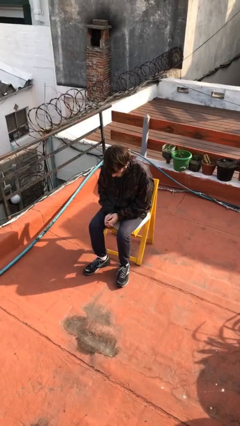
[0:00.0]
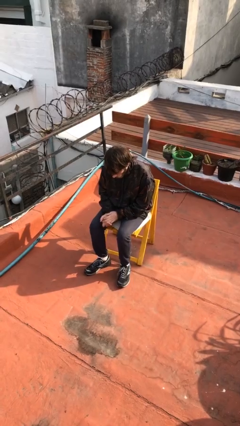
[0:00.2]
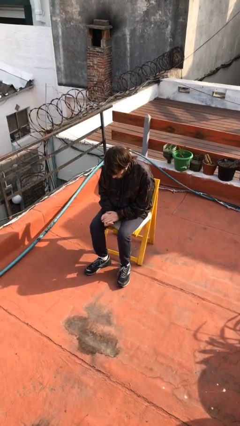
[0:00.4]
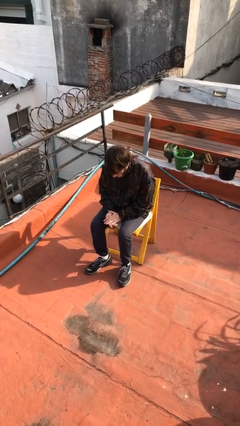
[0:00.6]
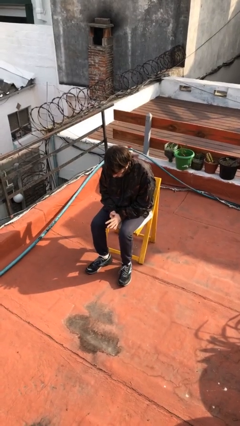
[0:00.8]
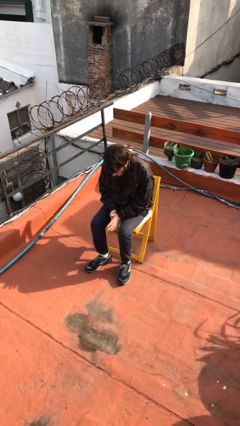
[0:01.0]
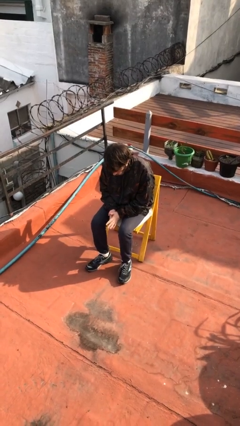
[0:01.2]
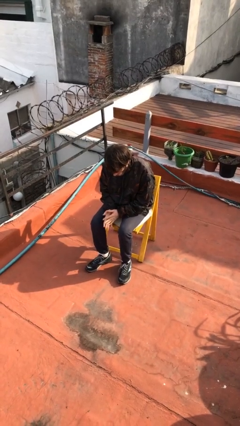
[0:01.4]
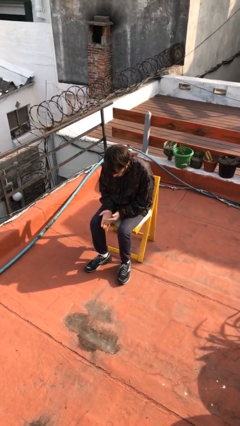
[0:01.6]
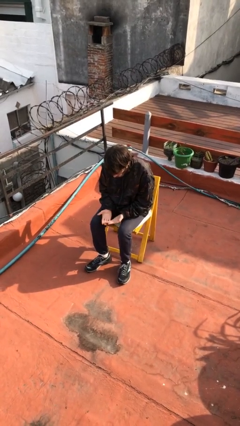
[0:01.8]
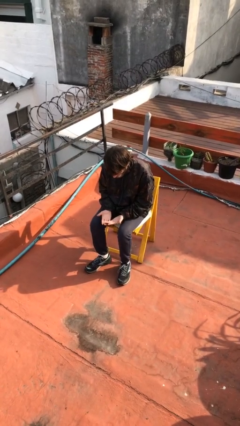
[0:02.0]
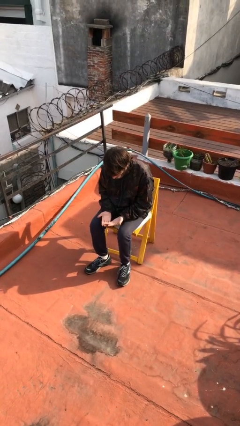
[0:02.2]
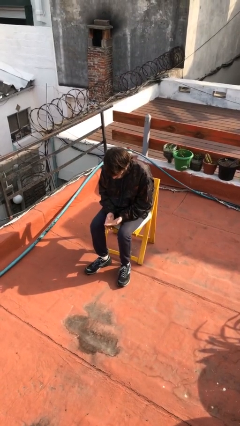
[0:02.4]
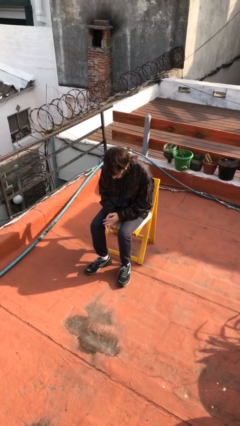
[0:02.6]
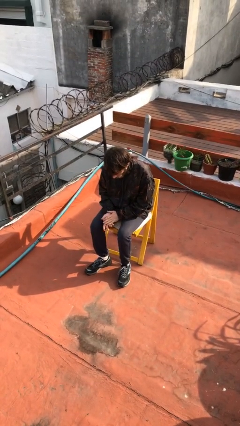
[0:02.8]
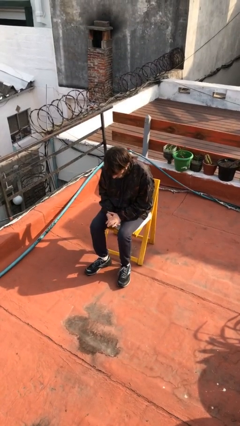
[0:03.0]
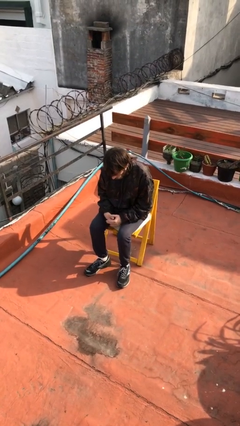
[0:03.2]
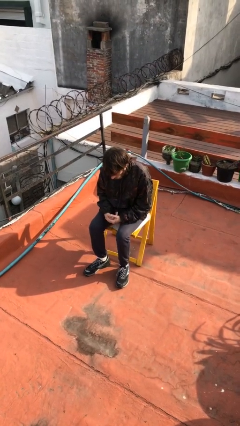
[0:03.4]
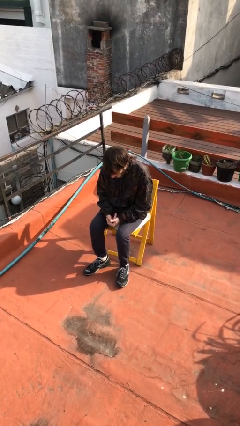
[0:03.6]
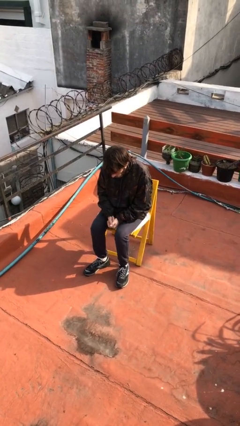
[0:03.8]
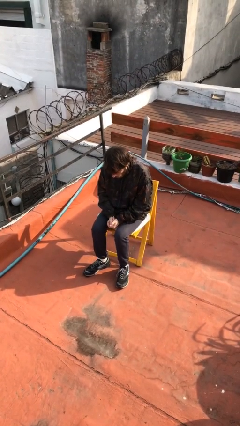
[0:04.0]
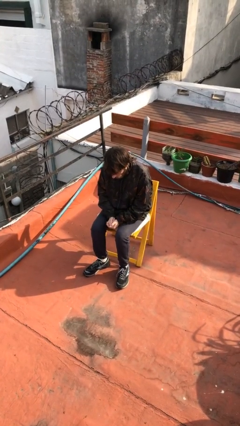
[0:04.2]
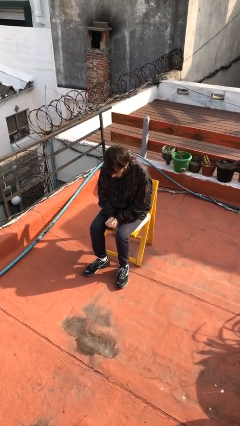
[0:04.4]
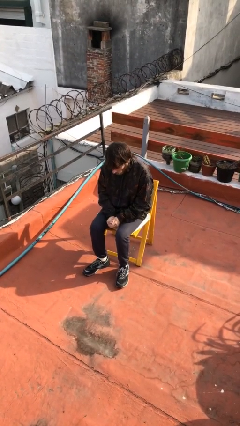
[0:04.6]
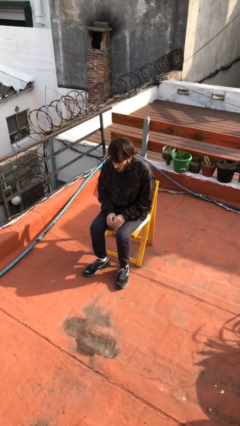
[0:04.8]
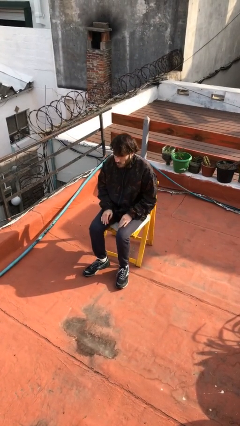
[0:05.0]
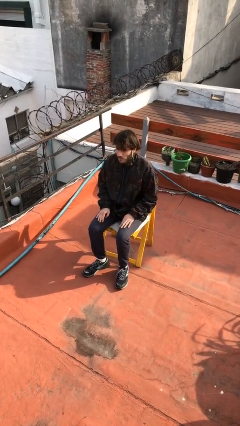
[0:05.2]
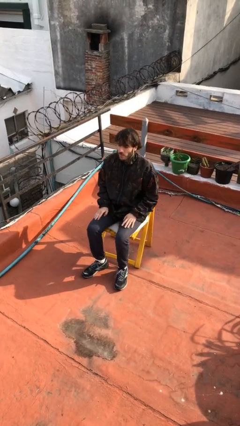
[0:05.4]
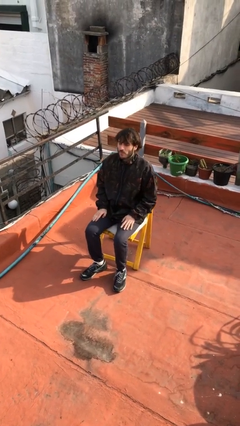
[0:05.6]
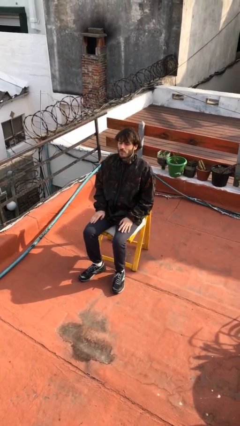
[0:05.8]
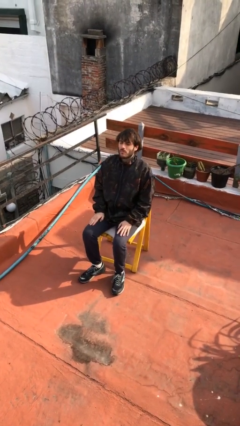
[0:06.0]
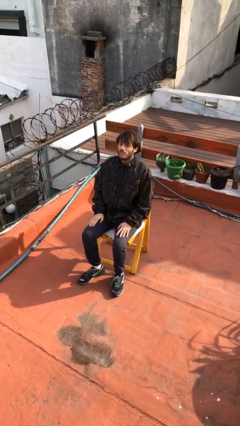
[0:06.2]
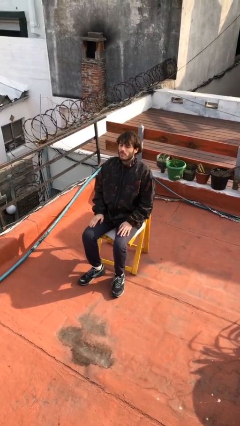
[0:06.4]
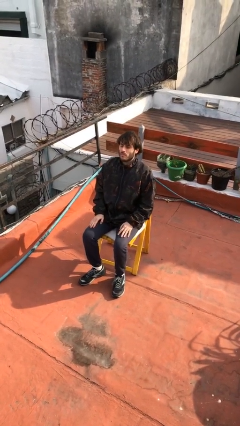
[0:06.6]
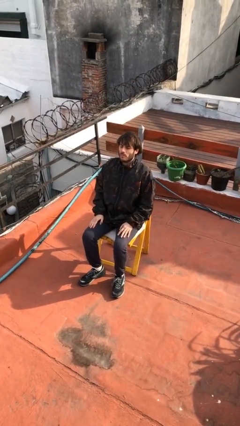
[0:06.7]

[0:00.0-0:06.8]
person looks at hands in lap

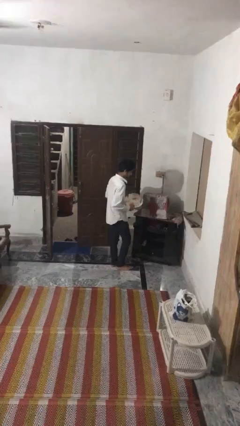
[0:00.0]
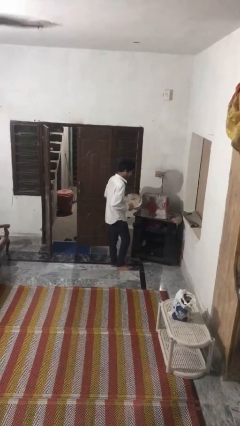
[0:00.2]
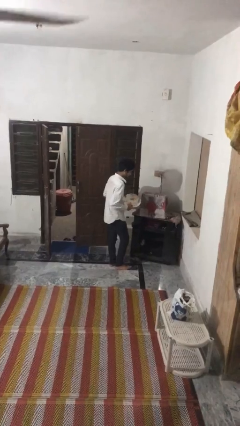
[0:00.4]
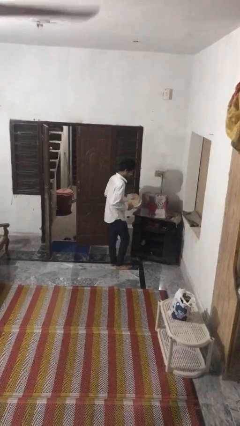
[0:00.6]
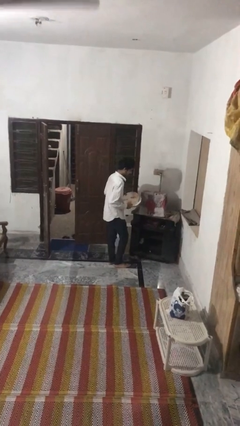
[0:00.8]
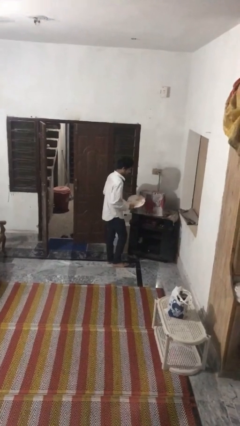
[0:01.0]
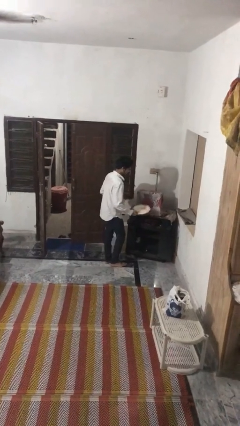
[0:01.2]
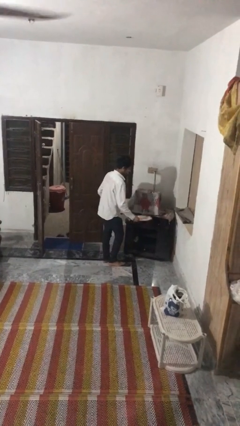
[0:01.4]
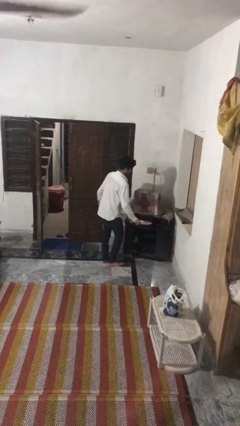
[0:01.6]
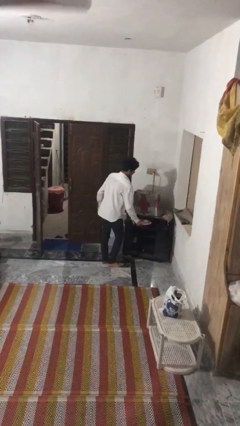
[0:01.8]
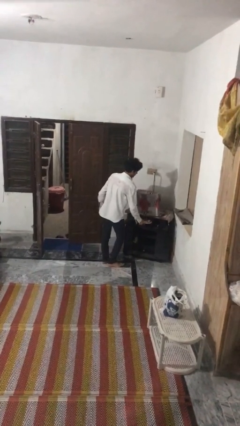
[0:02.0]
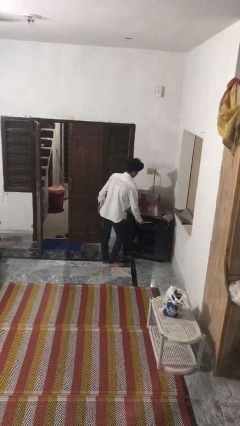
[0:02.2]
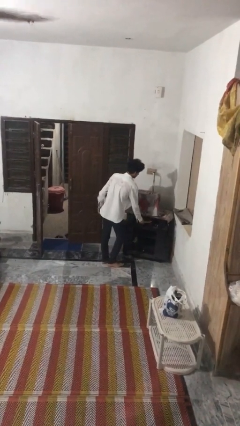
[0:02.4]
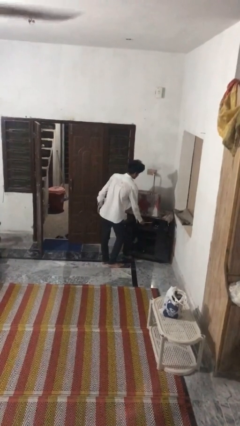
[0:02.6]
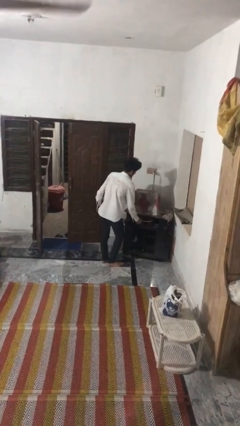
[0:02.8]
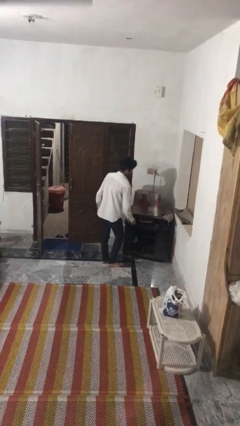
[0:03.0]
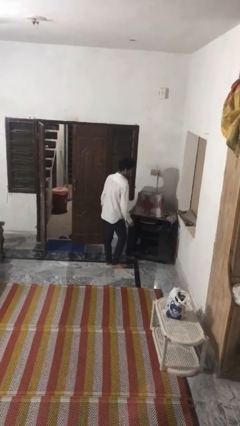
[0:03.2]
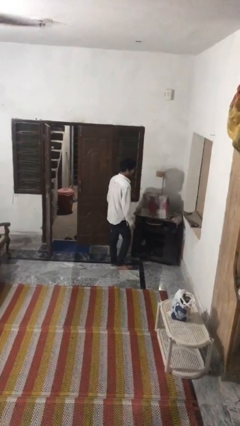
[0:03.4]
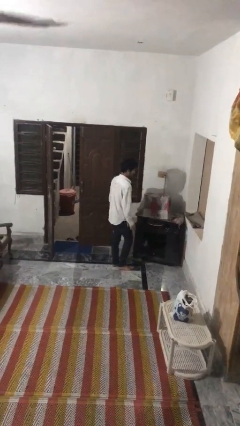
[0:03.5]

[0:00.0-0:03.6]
person puts down object into cabinet

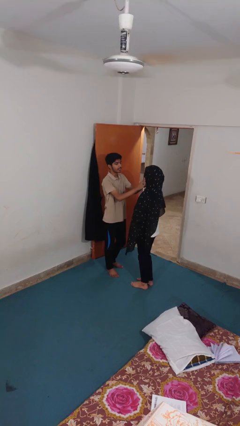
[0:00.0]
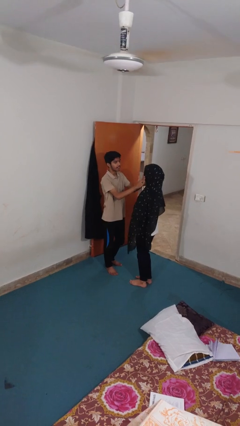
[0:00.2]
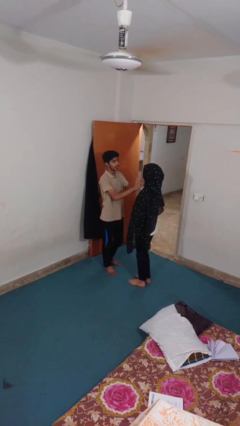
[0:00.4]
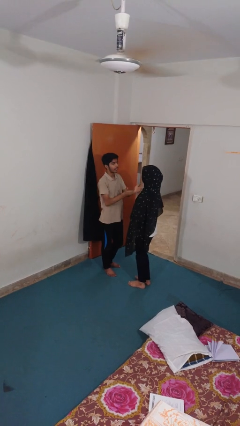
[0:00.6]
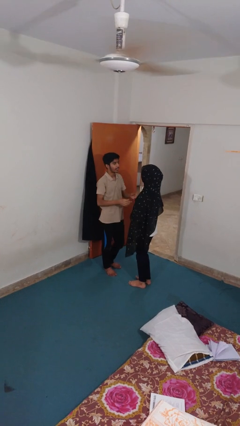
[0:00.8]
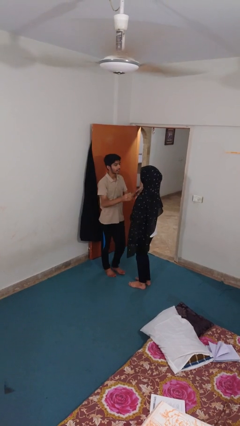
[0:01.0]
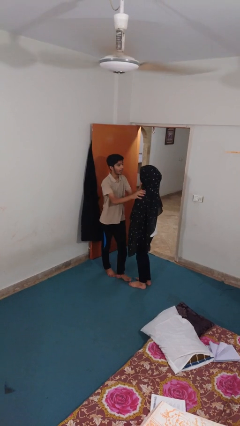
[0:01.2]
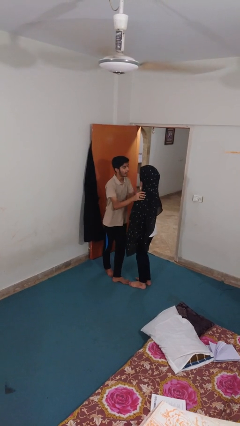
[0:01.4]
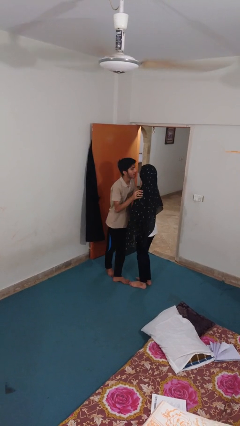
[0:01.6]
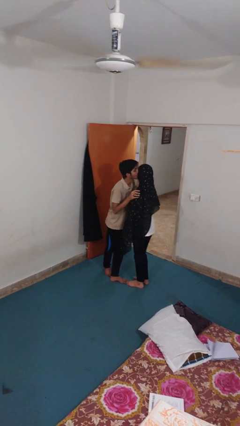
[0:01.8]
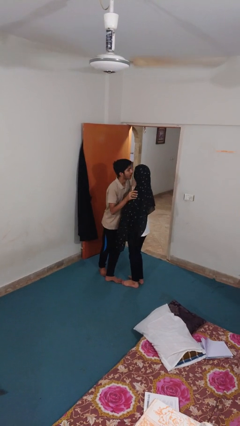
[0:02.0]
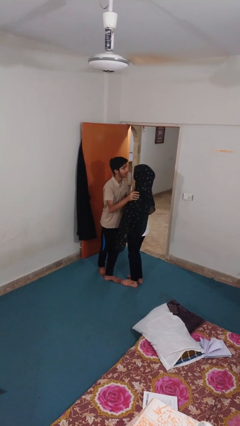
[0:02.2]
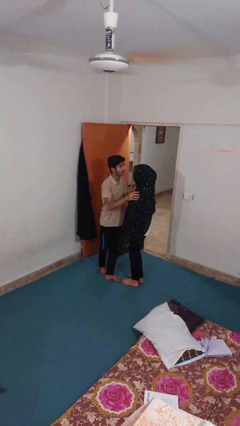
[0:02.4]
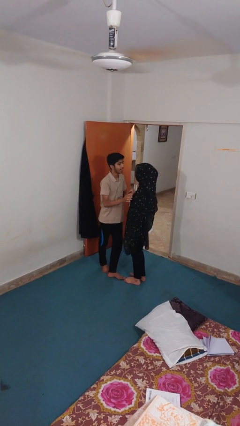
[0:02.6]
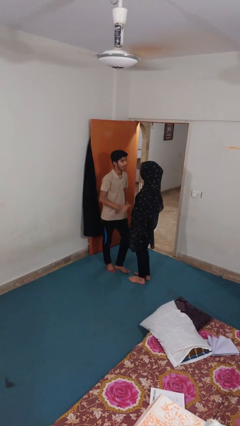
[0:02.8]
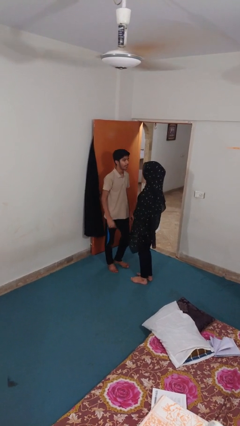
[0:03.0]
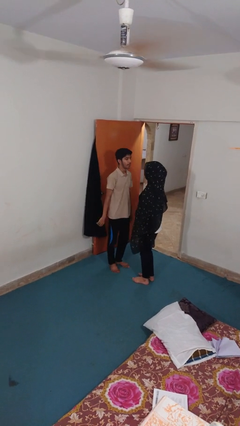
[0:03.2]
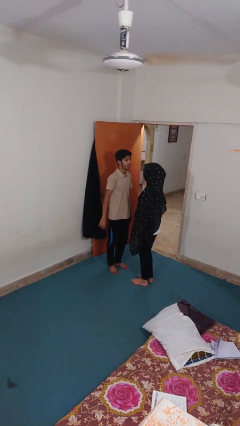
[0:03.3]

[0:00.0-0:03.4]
person kisses cheek of person

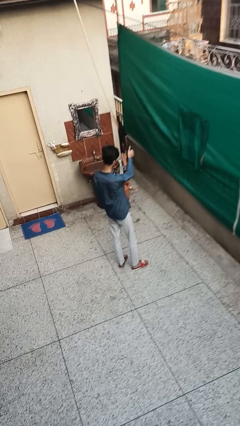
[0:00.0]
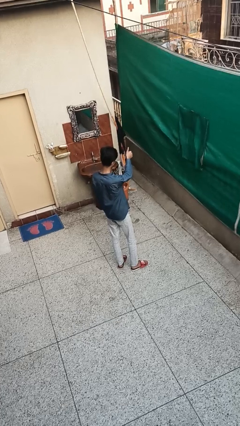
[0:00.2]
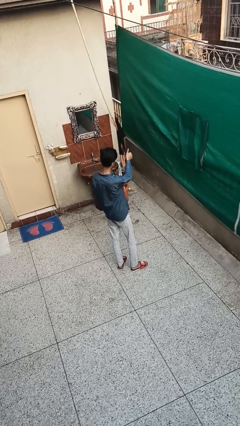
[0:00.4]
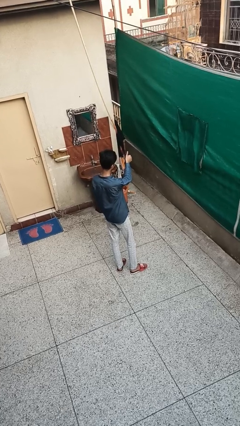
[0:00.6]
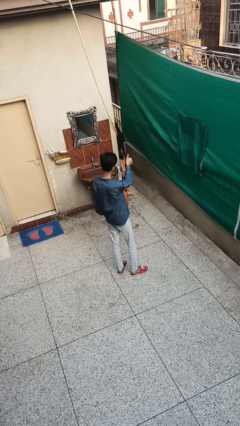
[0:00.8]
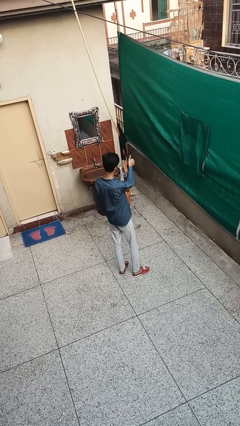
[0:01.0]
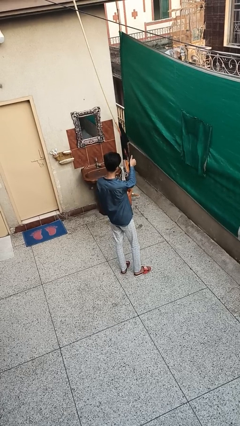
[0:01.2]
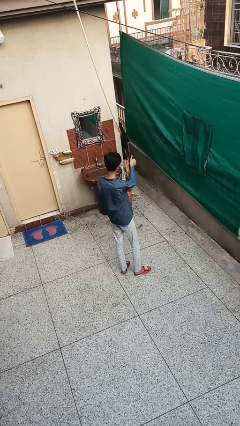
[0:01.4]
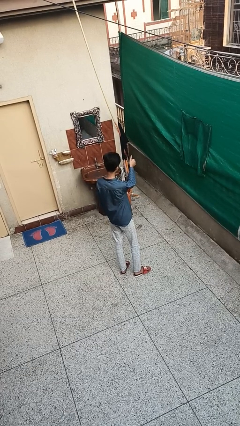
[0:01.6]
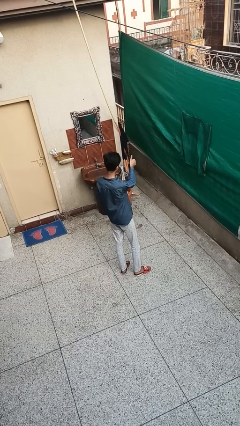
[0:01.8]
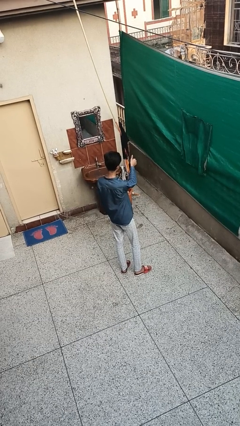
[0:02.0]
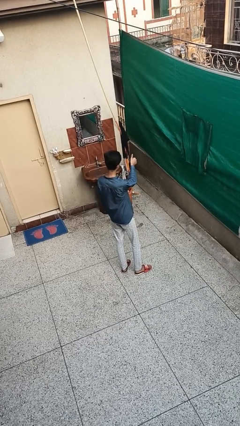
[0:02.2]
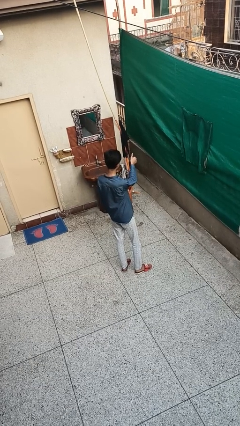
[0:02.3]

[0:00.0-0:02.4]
person gestures thumbs up

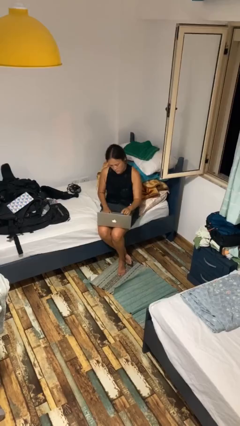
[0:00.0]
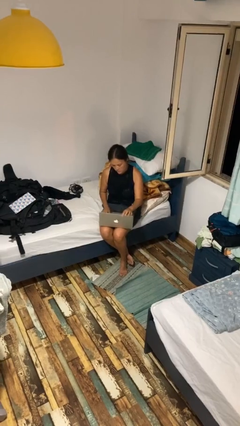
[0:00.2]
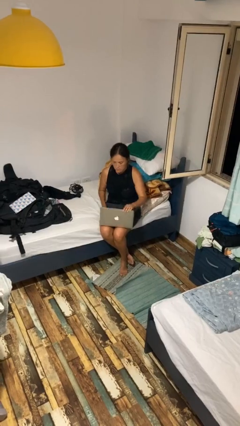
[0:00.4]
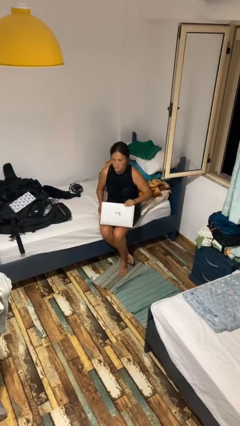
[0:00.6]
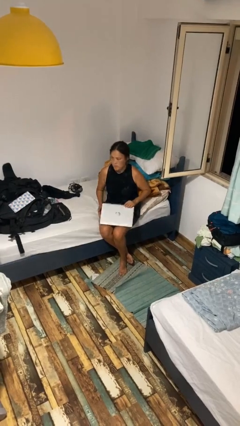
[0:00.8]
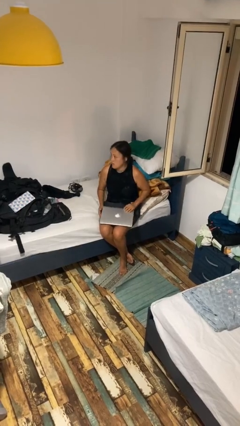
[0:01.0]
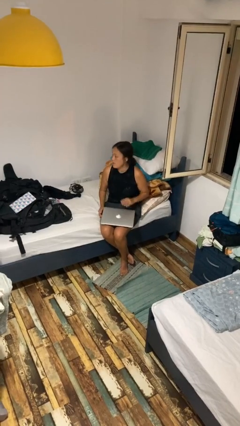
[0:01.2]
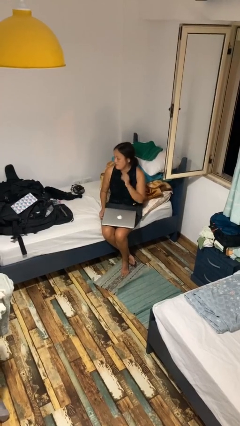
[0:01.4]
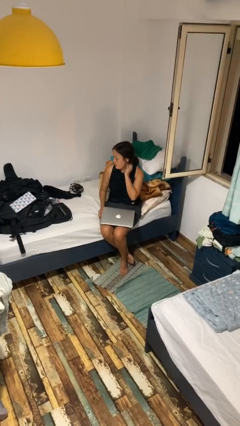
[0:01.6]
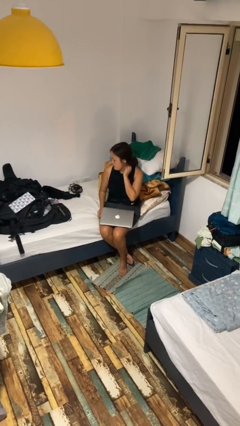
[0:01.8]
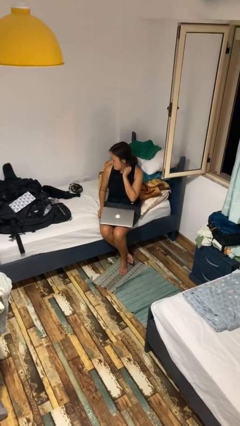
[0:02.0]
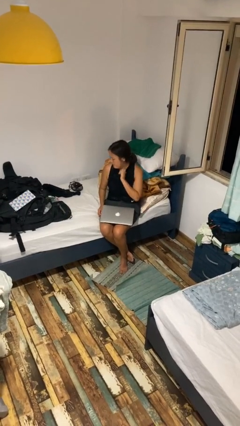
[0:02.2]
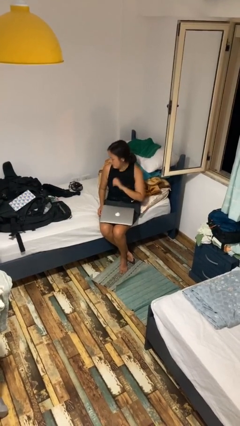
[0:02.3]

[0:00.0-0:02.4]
person closes laptop
